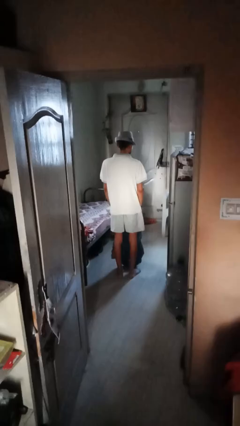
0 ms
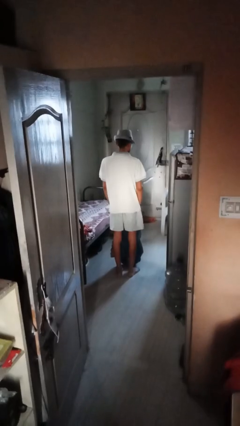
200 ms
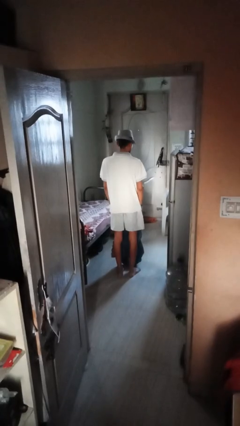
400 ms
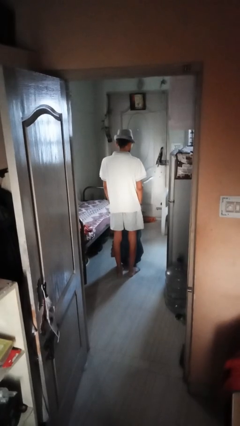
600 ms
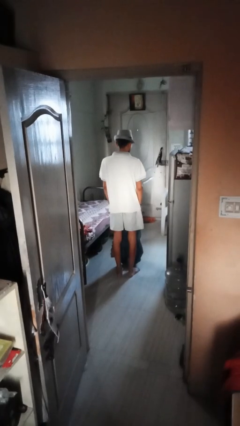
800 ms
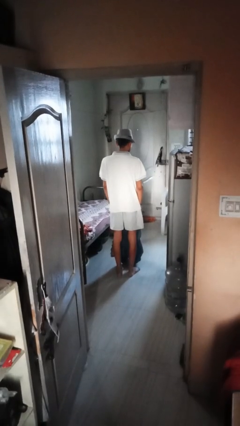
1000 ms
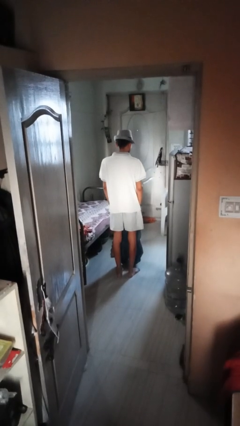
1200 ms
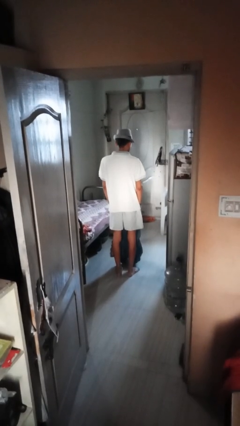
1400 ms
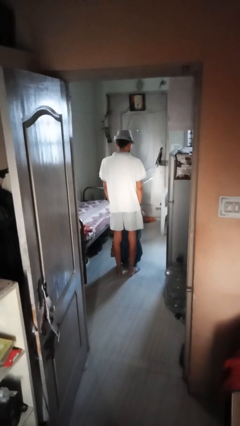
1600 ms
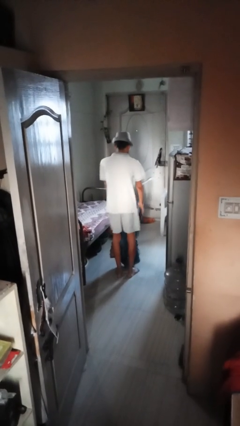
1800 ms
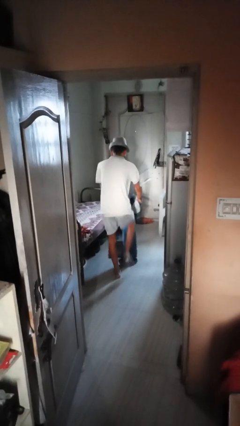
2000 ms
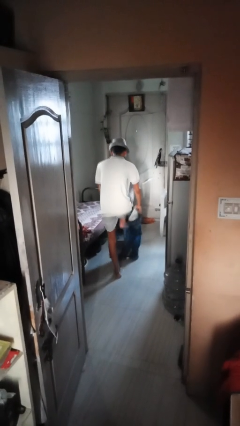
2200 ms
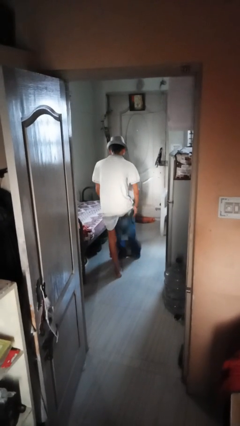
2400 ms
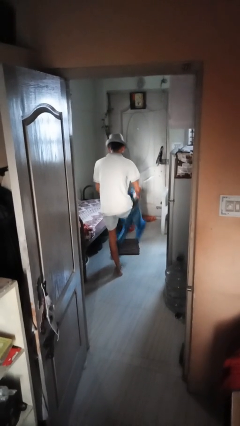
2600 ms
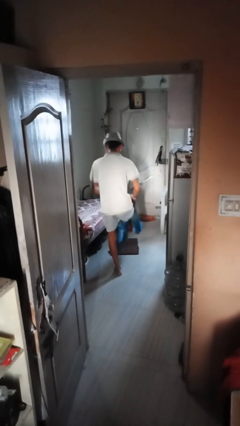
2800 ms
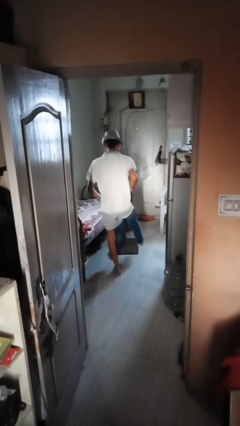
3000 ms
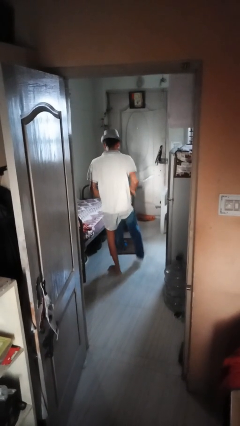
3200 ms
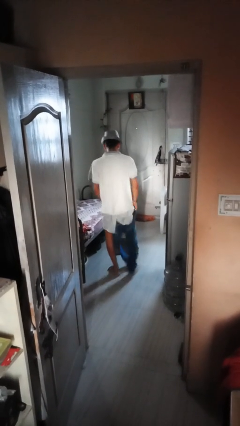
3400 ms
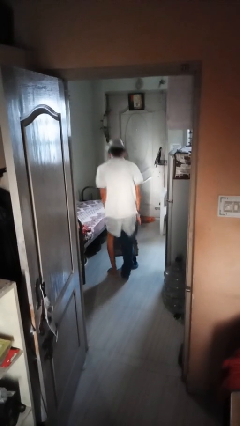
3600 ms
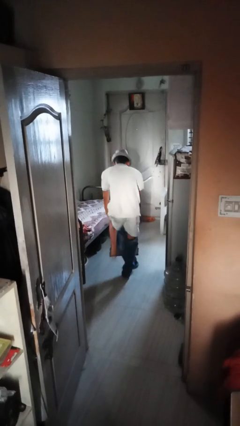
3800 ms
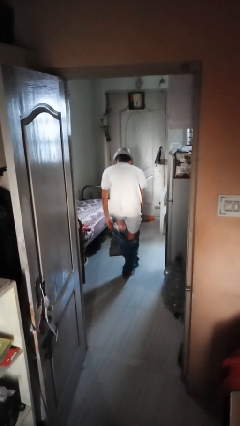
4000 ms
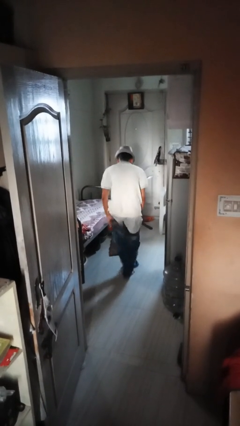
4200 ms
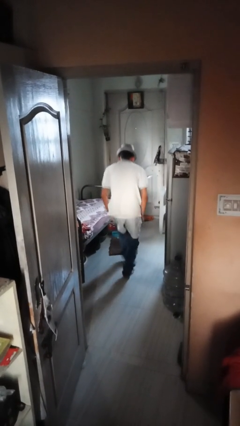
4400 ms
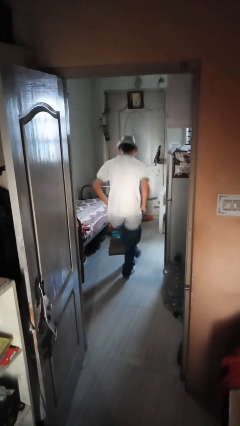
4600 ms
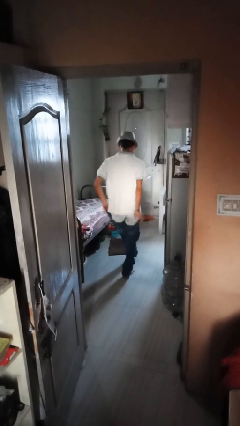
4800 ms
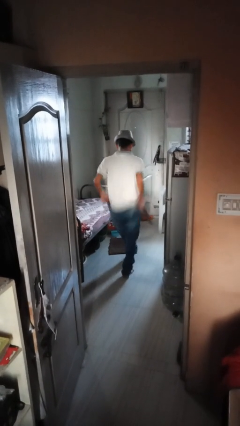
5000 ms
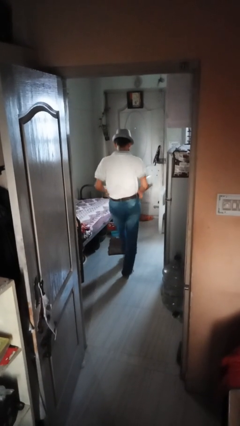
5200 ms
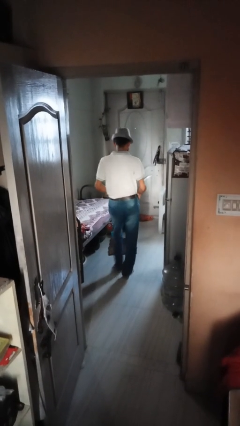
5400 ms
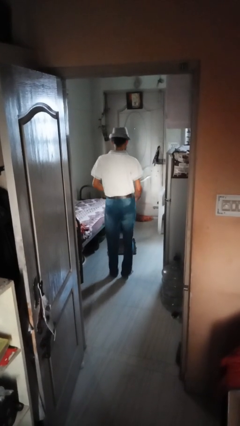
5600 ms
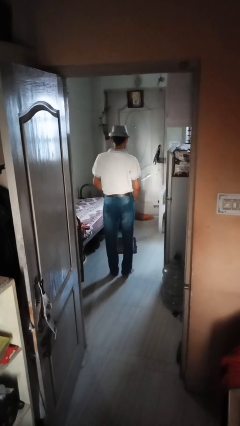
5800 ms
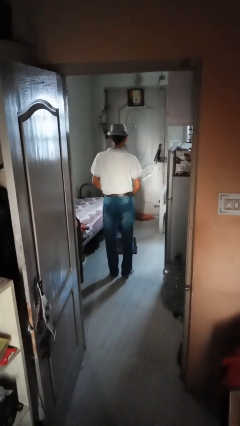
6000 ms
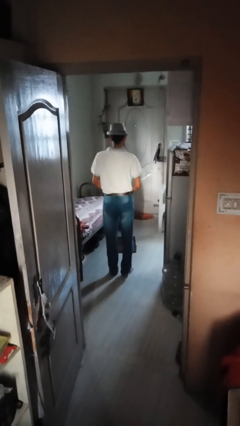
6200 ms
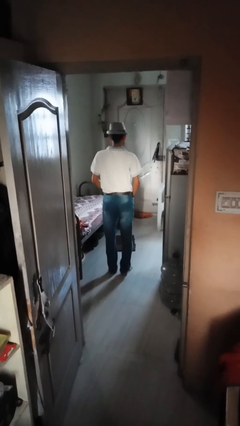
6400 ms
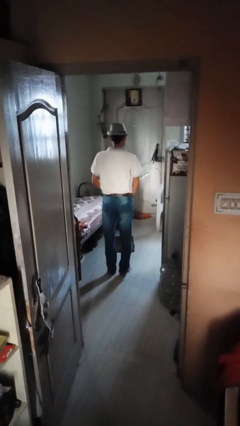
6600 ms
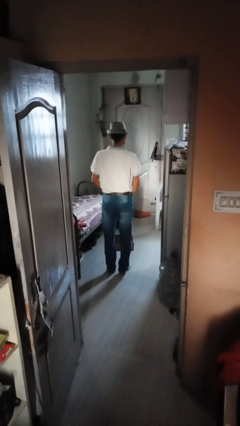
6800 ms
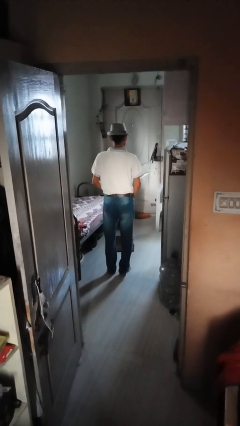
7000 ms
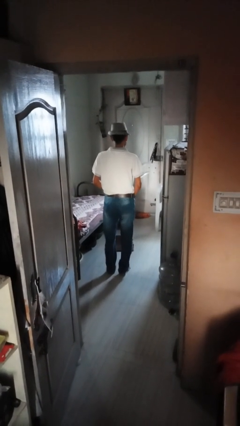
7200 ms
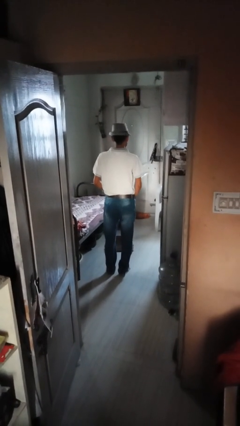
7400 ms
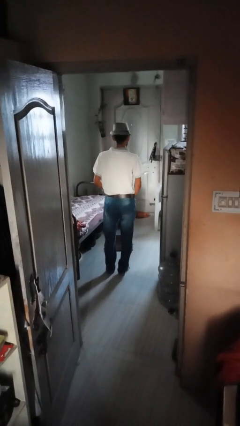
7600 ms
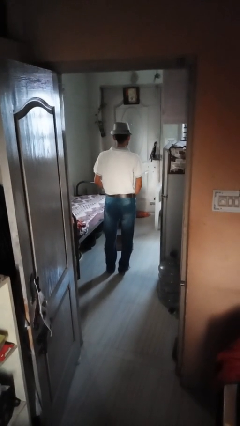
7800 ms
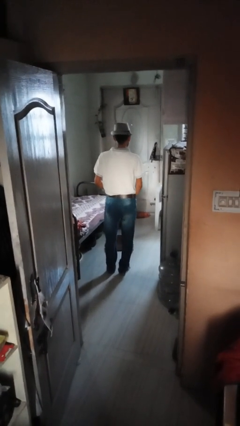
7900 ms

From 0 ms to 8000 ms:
person puts on pants

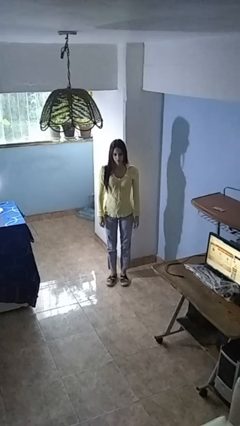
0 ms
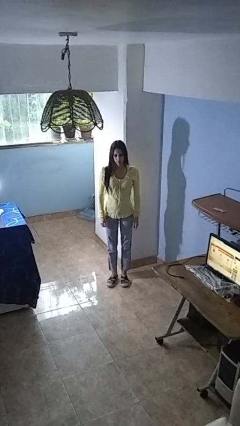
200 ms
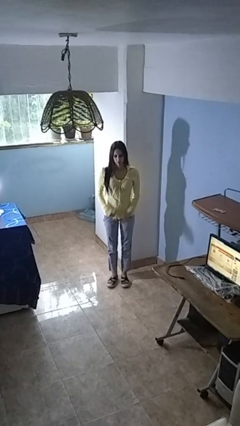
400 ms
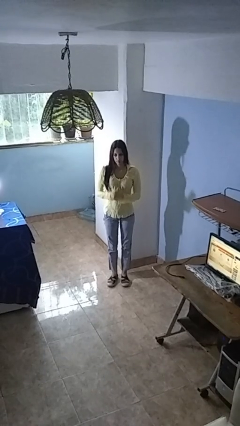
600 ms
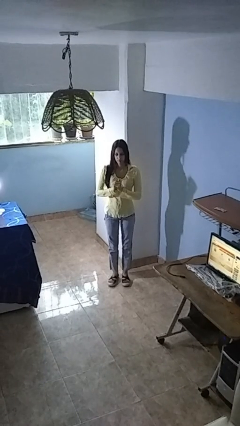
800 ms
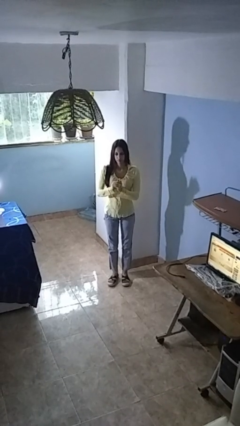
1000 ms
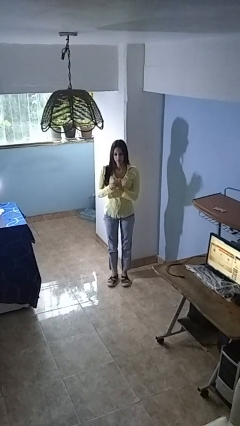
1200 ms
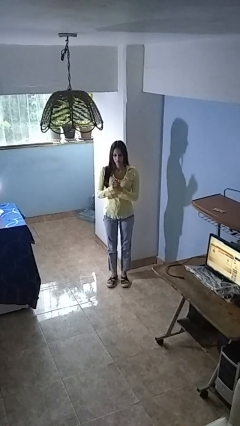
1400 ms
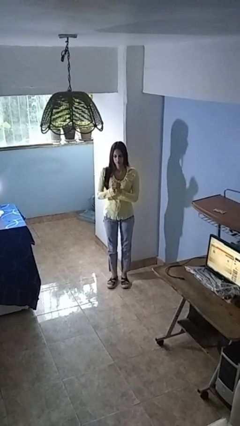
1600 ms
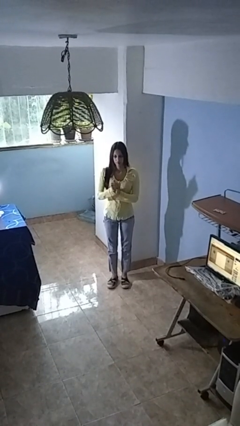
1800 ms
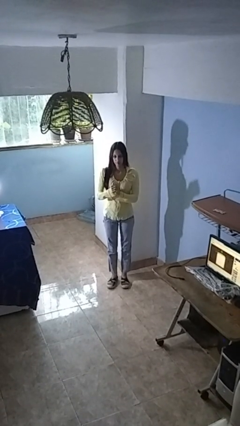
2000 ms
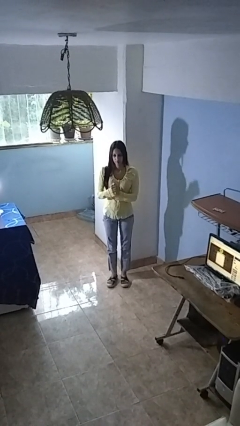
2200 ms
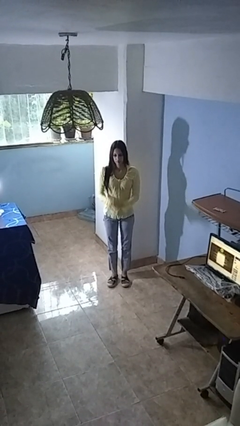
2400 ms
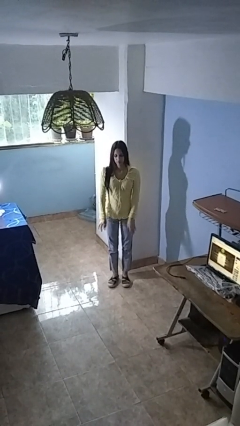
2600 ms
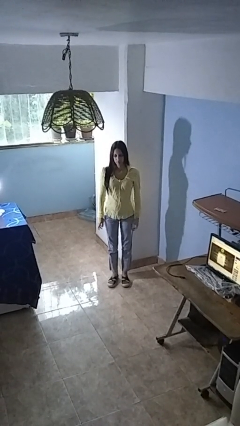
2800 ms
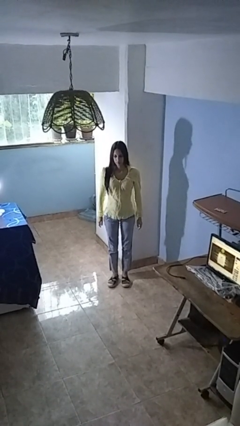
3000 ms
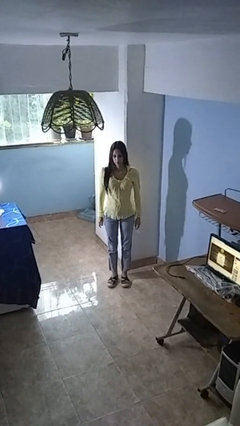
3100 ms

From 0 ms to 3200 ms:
person cracks knuckles

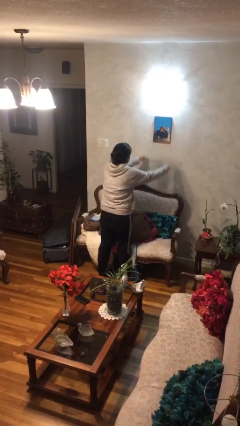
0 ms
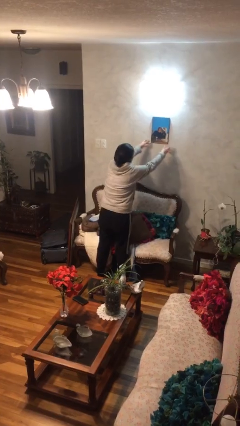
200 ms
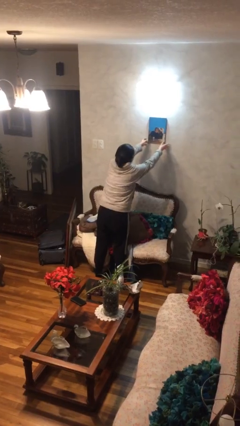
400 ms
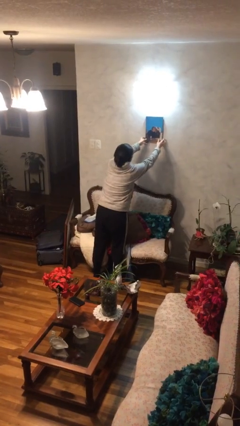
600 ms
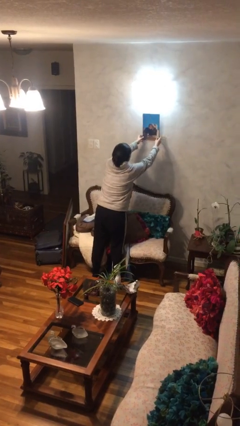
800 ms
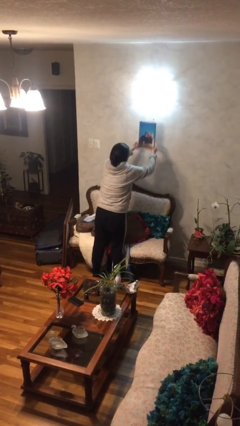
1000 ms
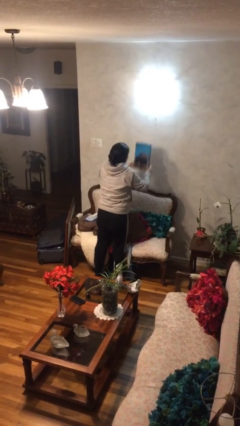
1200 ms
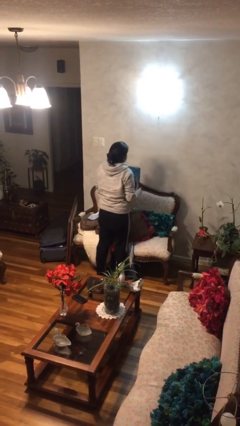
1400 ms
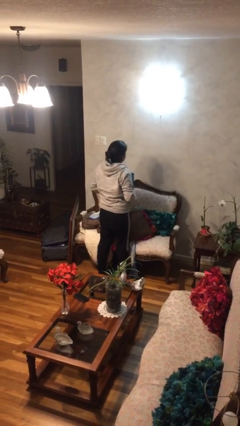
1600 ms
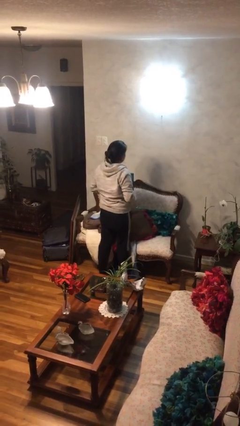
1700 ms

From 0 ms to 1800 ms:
person takes down picture frame

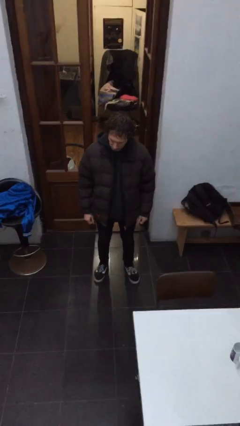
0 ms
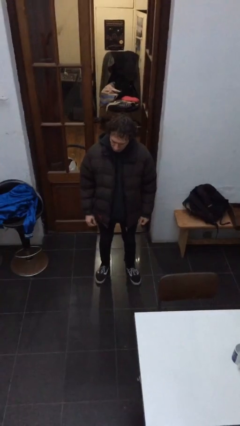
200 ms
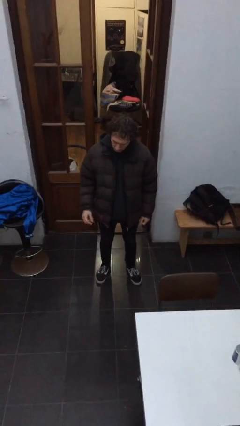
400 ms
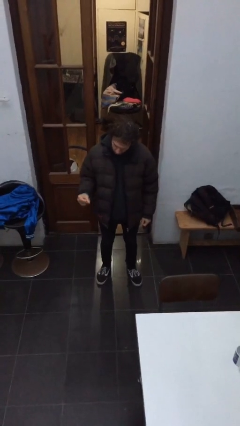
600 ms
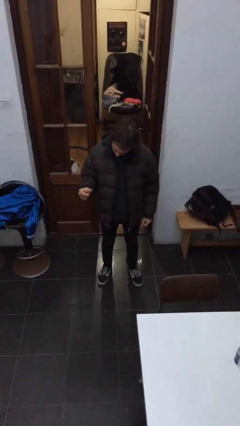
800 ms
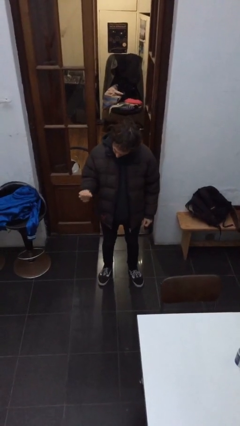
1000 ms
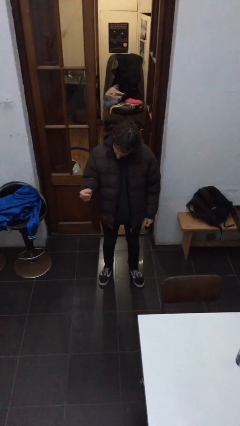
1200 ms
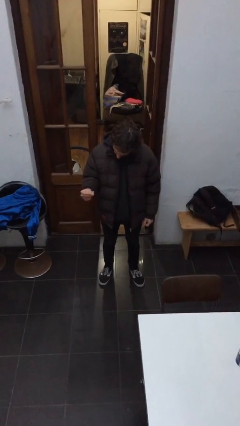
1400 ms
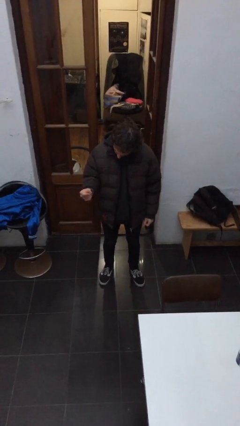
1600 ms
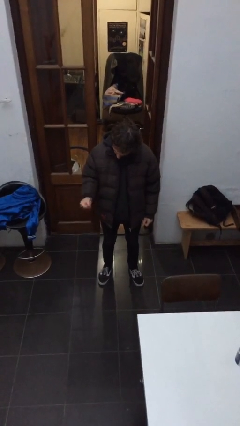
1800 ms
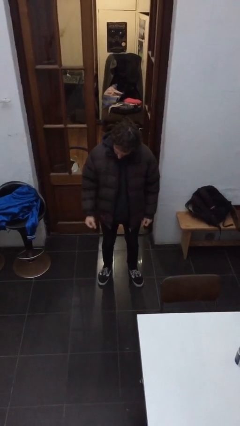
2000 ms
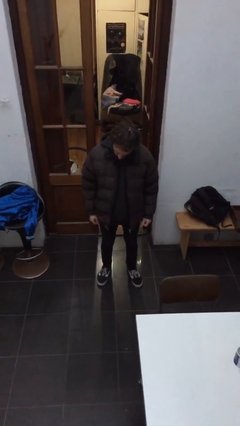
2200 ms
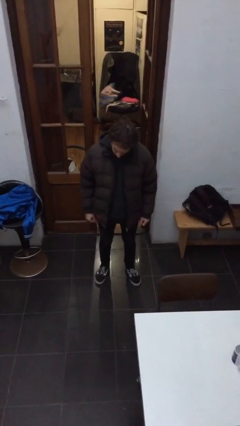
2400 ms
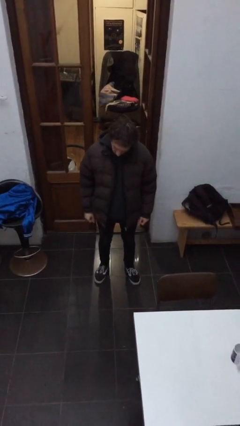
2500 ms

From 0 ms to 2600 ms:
person snaps fingers

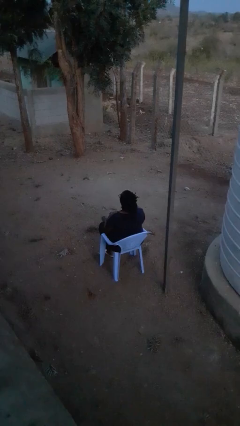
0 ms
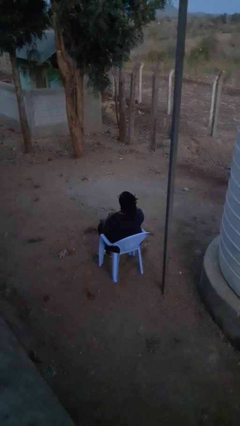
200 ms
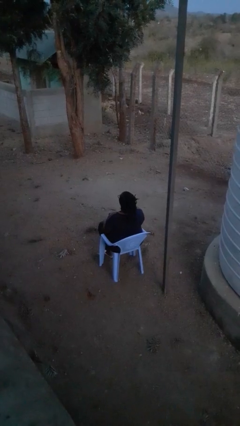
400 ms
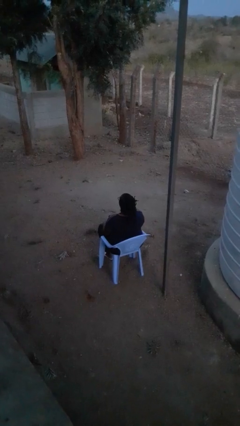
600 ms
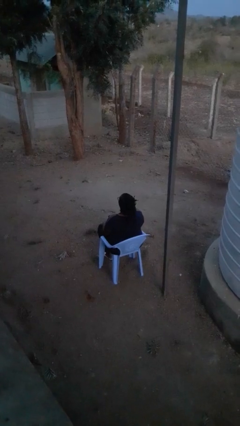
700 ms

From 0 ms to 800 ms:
person prays

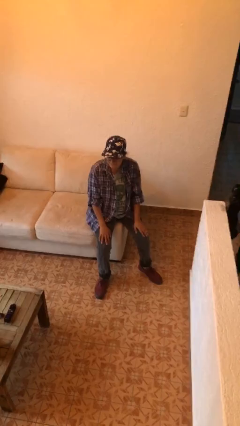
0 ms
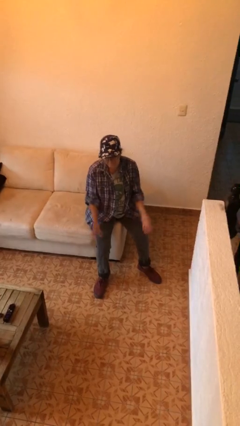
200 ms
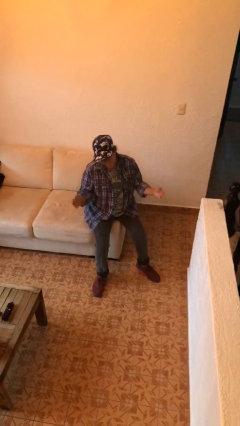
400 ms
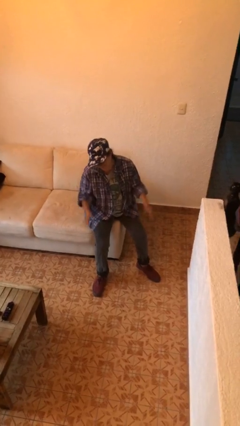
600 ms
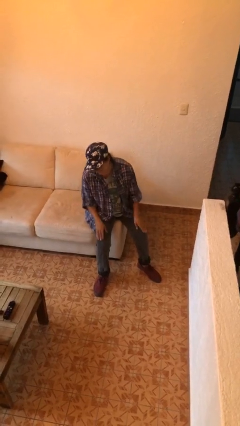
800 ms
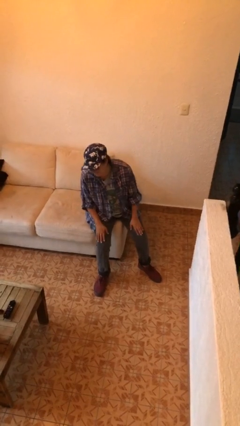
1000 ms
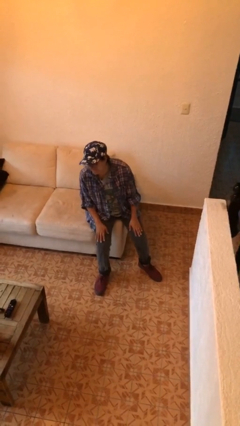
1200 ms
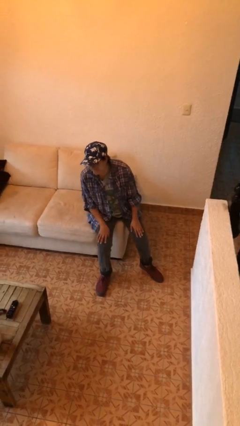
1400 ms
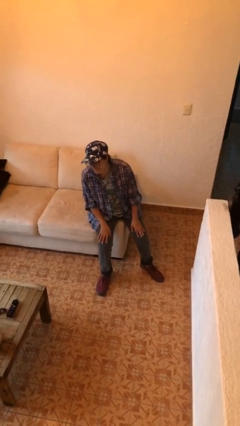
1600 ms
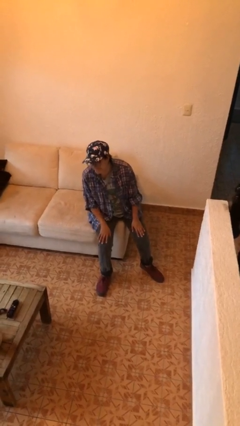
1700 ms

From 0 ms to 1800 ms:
person slaps hands on thighs
